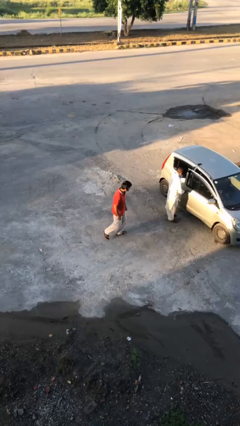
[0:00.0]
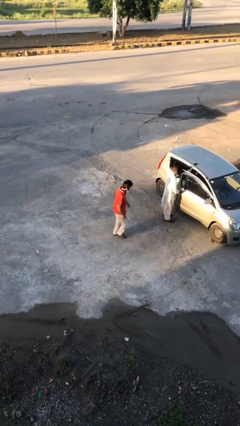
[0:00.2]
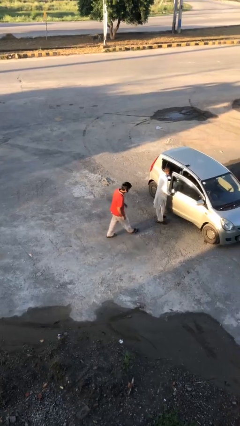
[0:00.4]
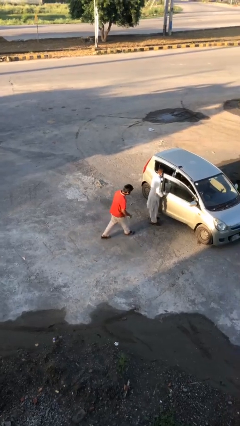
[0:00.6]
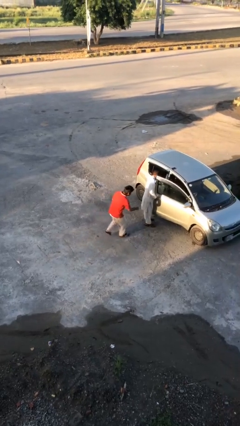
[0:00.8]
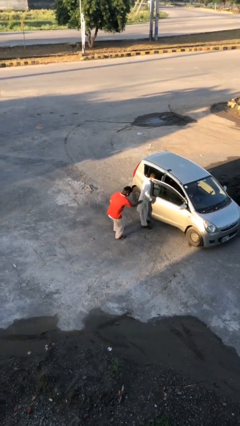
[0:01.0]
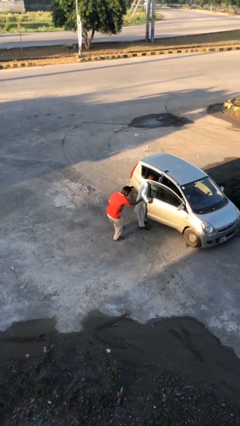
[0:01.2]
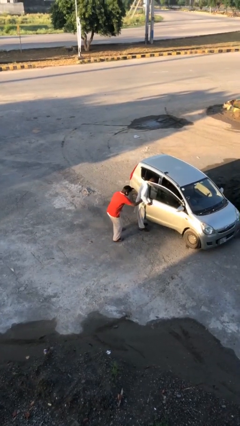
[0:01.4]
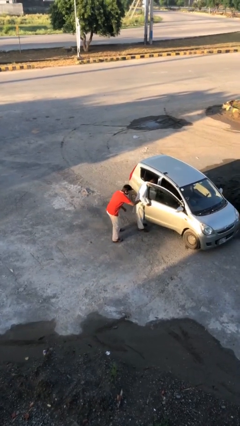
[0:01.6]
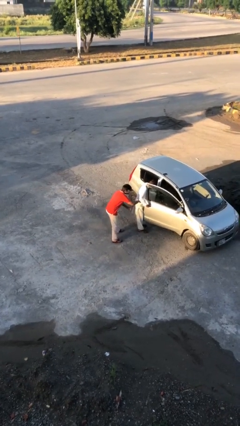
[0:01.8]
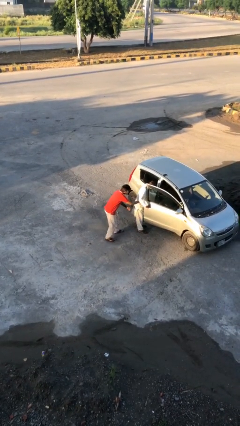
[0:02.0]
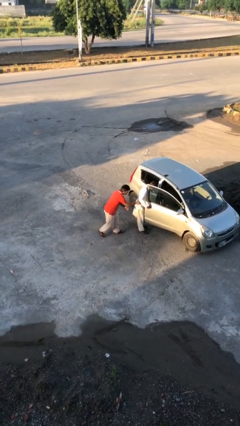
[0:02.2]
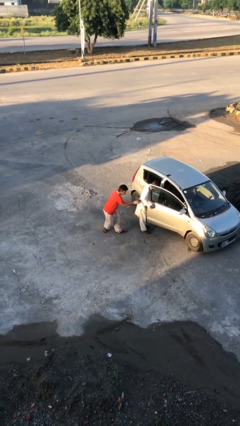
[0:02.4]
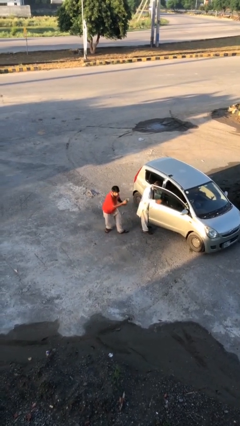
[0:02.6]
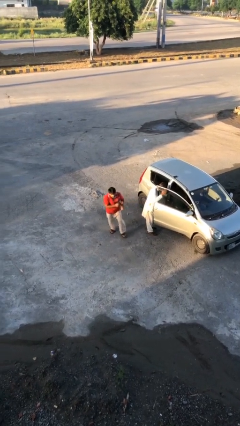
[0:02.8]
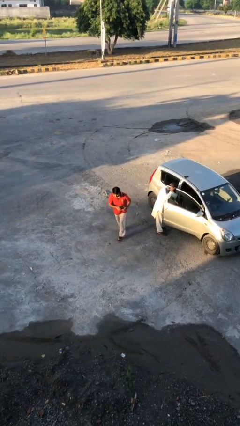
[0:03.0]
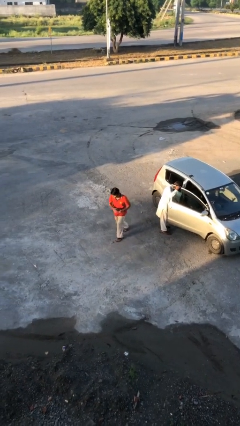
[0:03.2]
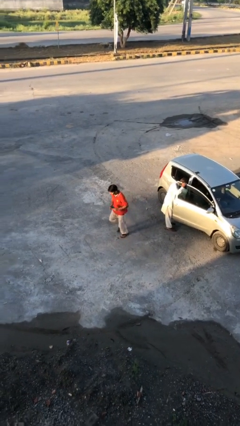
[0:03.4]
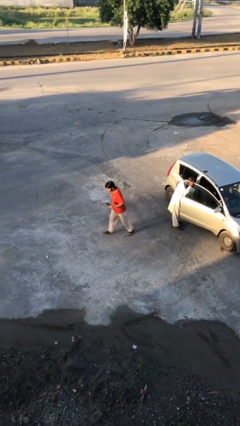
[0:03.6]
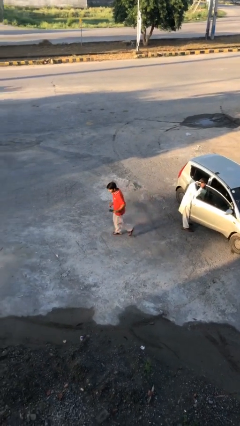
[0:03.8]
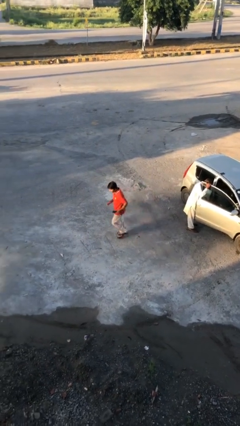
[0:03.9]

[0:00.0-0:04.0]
person steals object from person

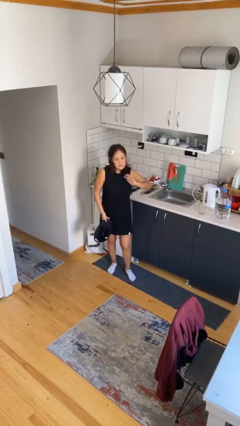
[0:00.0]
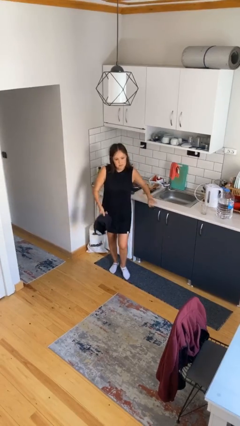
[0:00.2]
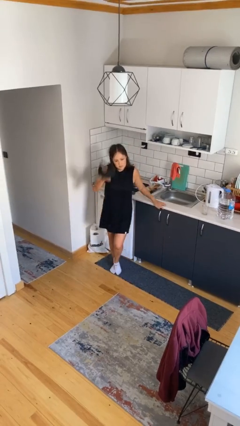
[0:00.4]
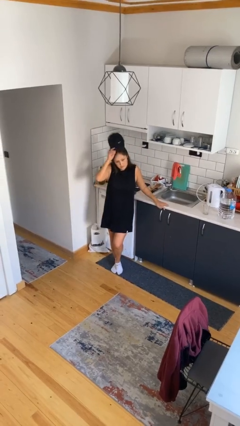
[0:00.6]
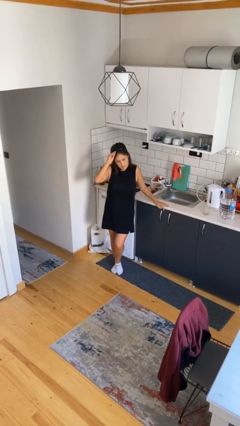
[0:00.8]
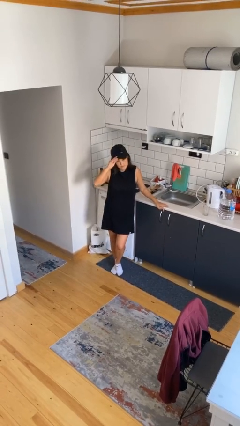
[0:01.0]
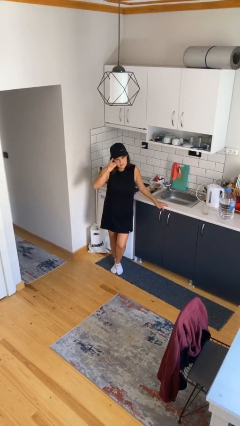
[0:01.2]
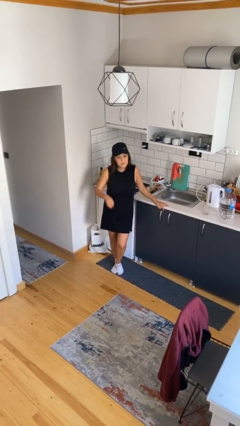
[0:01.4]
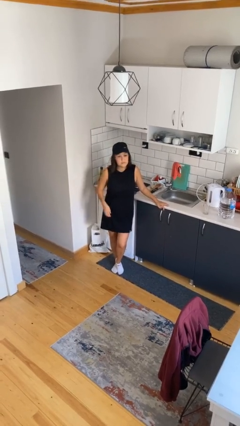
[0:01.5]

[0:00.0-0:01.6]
person puts on hat

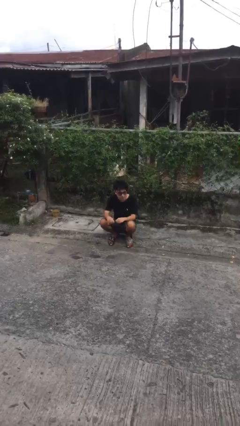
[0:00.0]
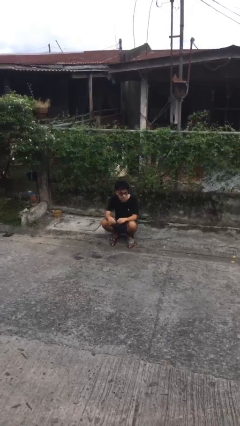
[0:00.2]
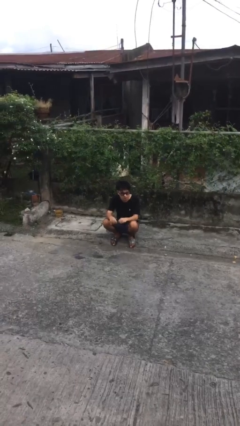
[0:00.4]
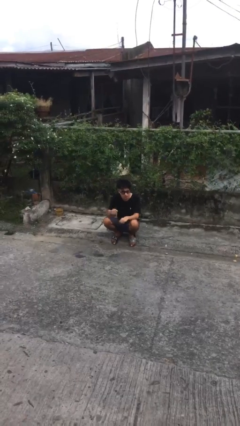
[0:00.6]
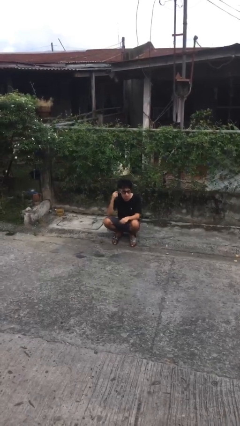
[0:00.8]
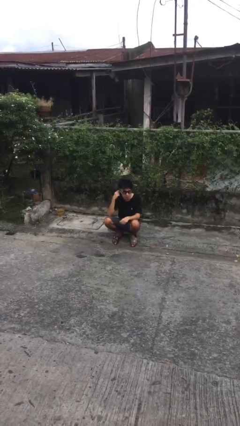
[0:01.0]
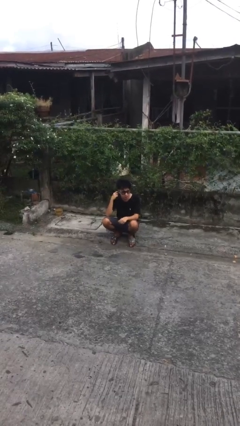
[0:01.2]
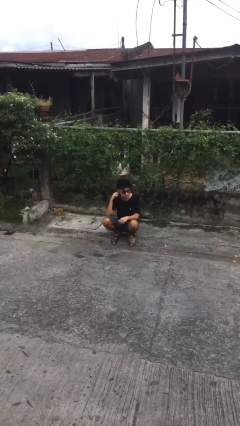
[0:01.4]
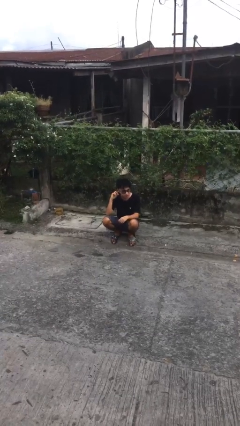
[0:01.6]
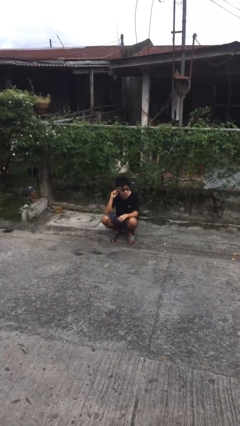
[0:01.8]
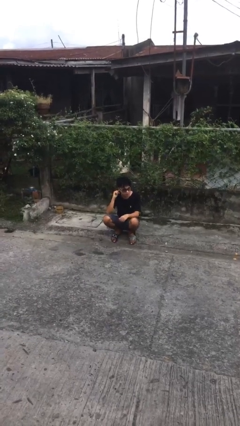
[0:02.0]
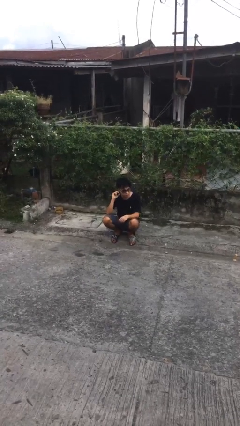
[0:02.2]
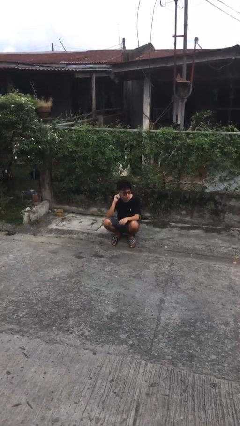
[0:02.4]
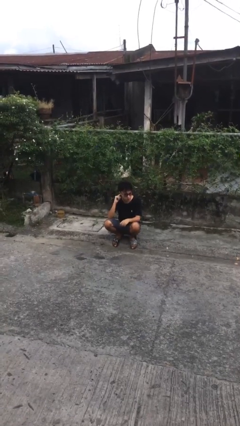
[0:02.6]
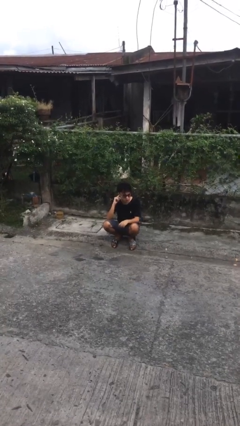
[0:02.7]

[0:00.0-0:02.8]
person touches earlobe

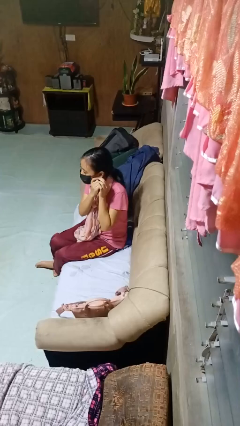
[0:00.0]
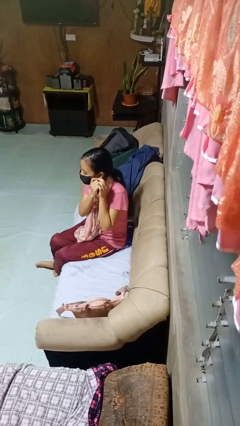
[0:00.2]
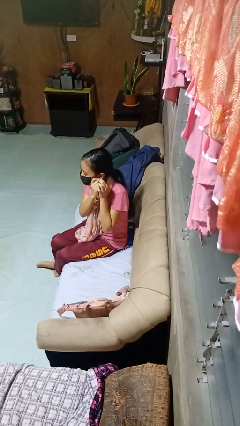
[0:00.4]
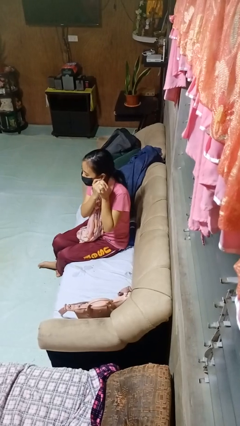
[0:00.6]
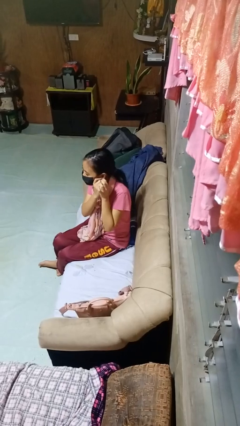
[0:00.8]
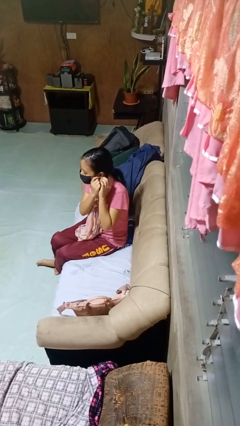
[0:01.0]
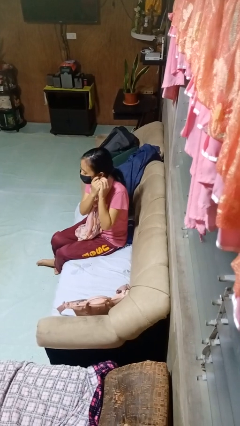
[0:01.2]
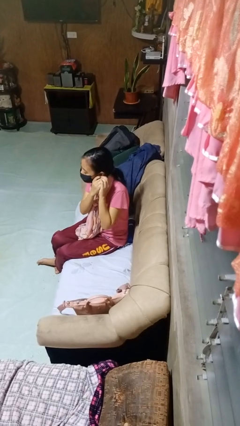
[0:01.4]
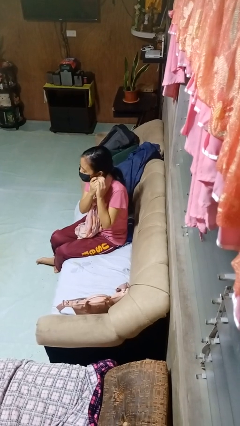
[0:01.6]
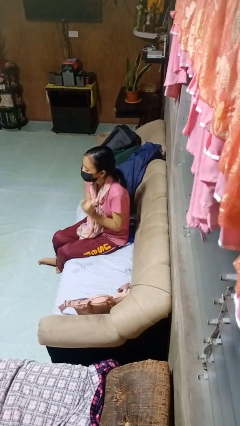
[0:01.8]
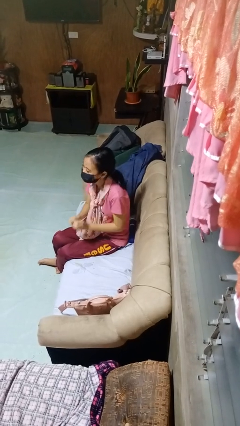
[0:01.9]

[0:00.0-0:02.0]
person puts on earrings

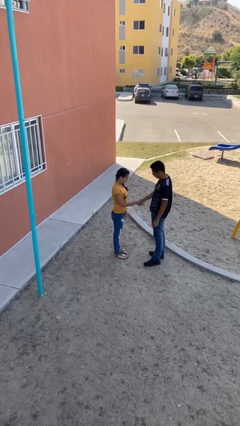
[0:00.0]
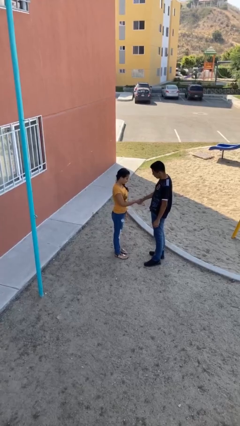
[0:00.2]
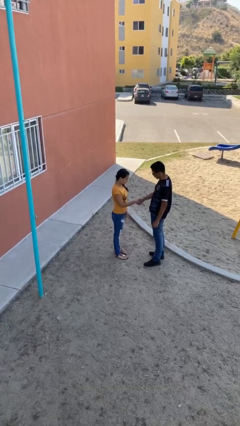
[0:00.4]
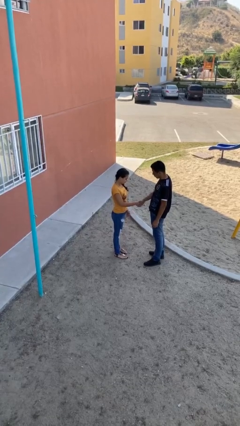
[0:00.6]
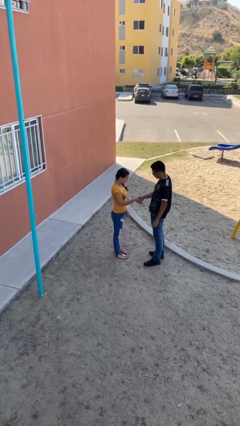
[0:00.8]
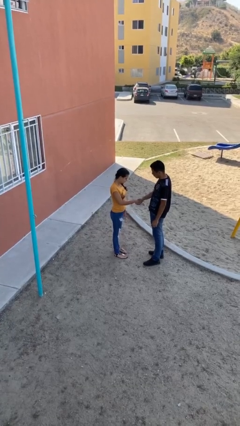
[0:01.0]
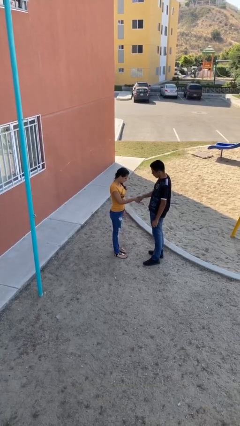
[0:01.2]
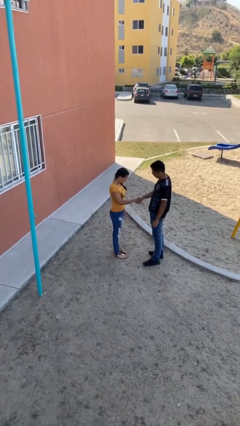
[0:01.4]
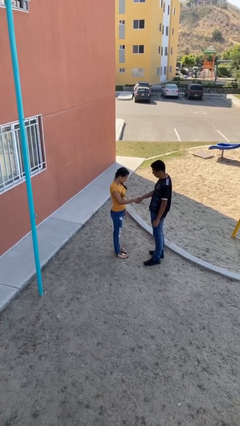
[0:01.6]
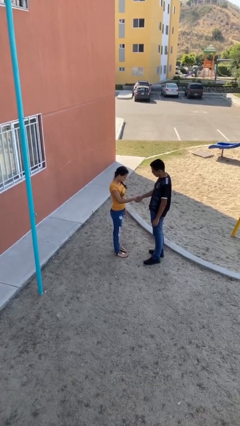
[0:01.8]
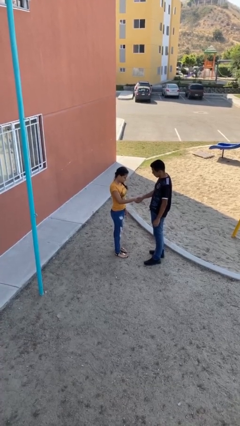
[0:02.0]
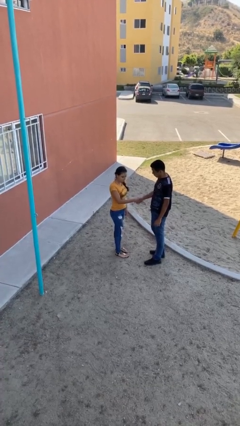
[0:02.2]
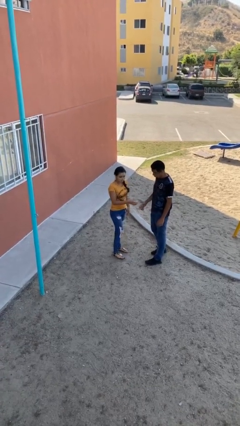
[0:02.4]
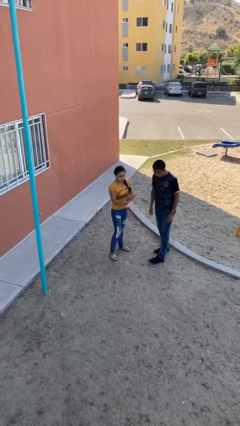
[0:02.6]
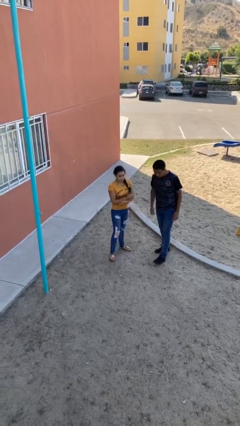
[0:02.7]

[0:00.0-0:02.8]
person shakes hand

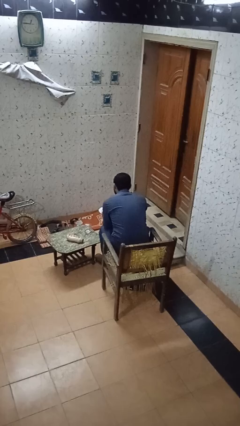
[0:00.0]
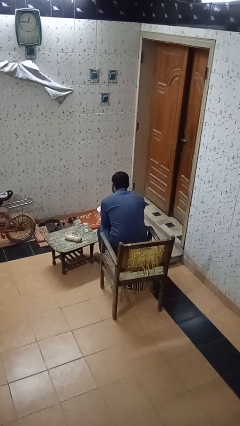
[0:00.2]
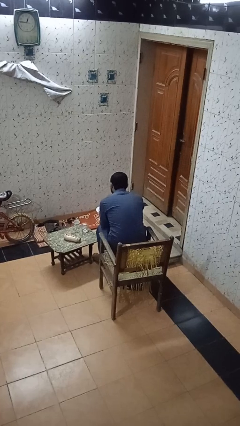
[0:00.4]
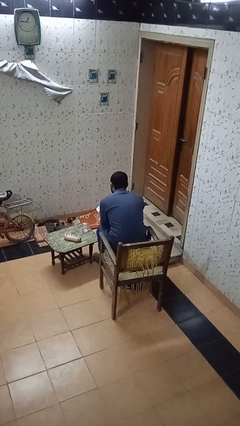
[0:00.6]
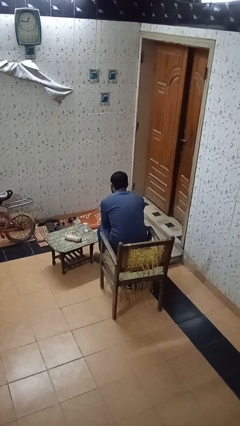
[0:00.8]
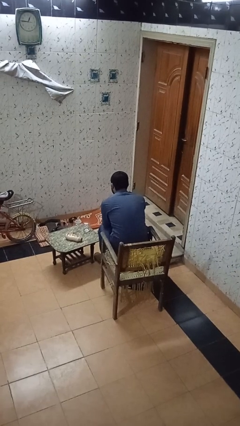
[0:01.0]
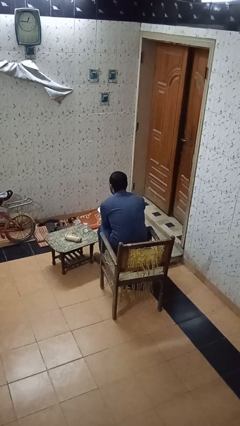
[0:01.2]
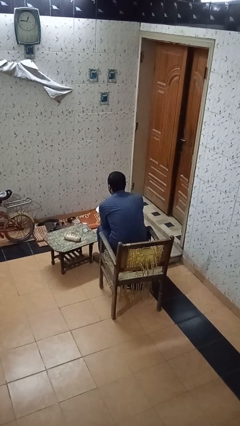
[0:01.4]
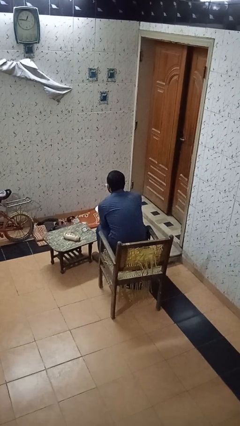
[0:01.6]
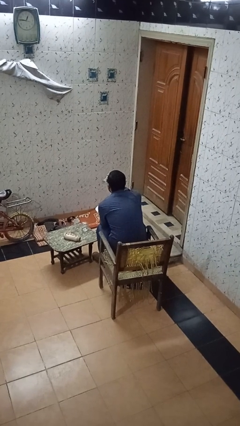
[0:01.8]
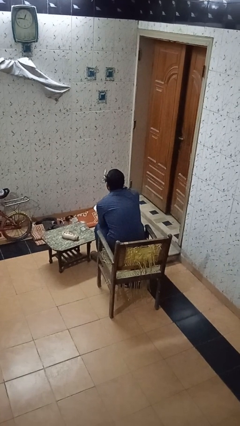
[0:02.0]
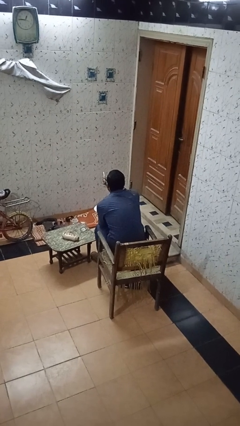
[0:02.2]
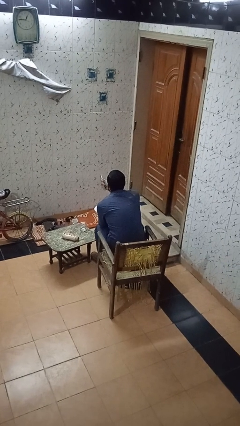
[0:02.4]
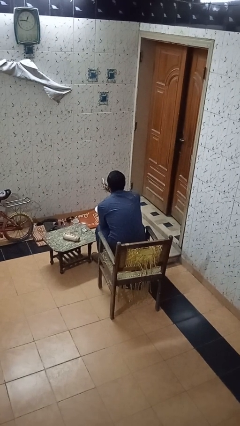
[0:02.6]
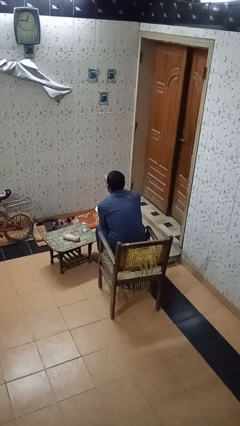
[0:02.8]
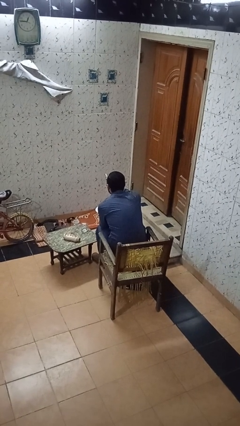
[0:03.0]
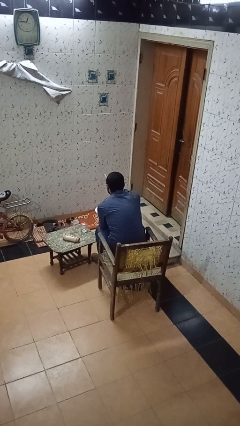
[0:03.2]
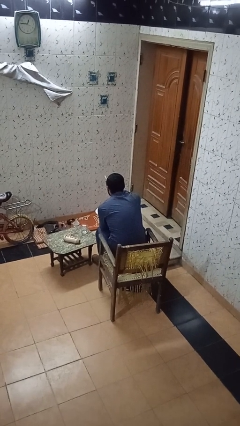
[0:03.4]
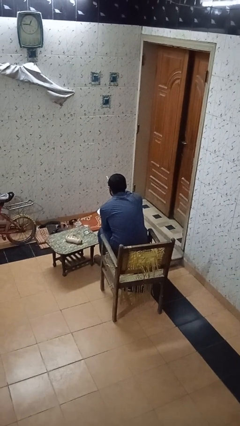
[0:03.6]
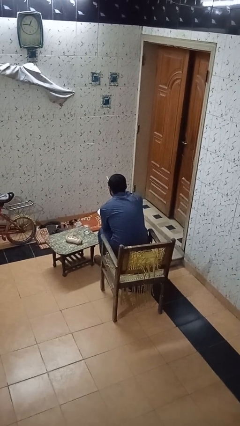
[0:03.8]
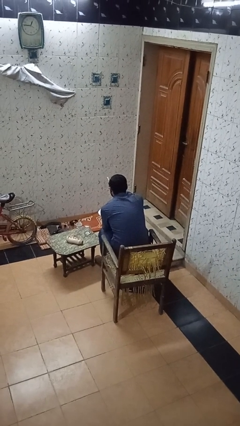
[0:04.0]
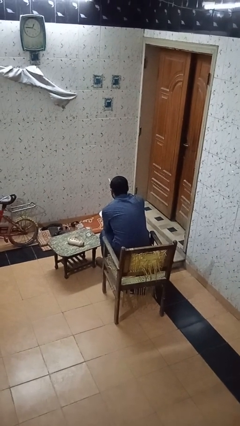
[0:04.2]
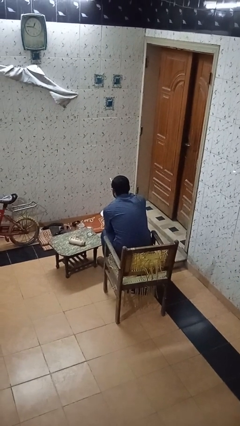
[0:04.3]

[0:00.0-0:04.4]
person eats with utensil
